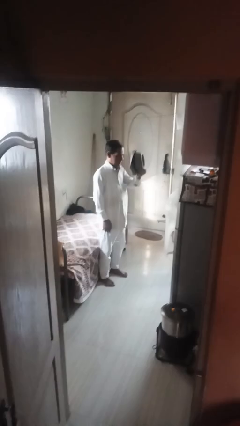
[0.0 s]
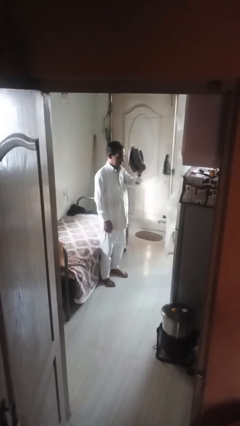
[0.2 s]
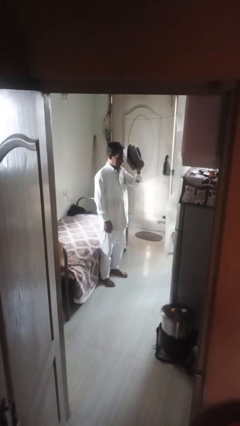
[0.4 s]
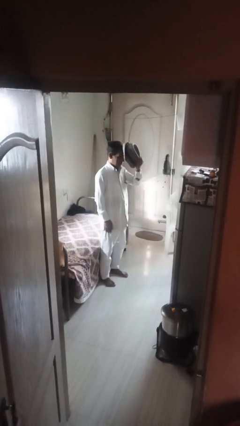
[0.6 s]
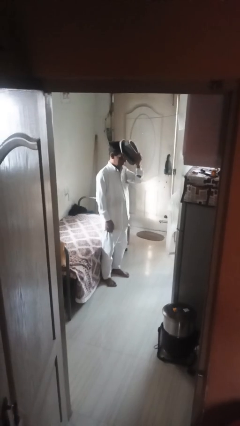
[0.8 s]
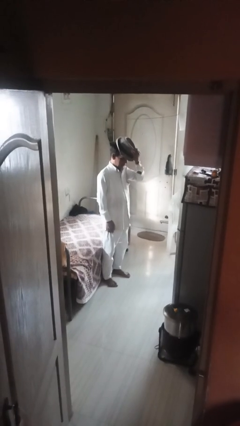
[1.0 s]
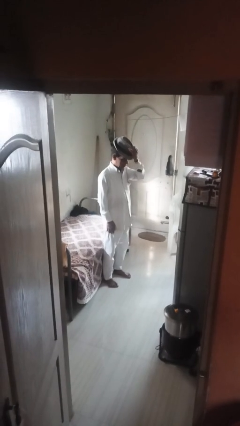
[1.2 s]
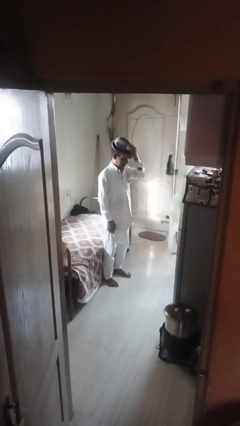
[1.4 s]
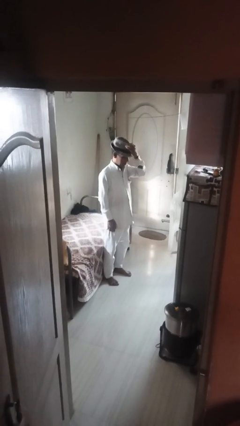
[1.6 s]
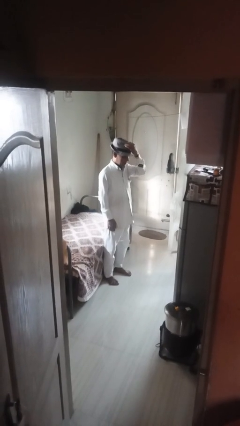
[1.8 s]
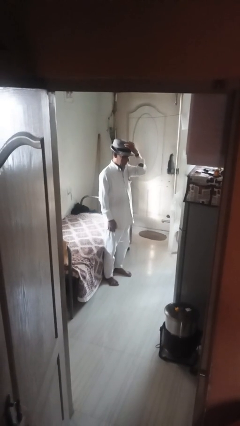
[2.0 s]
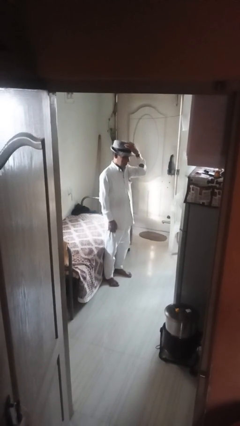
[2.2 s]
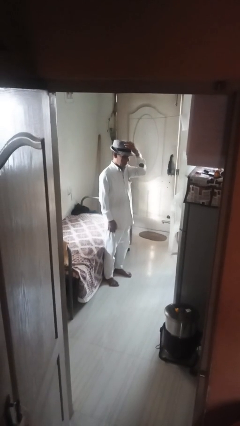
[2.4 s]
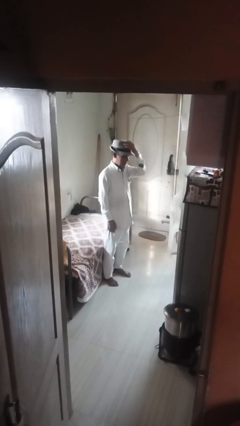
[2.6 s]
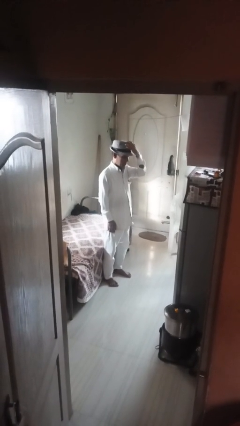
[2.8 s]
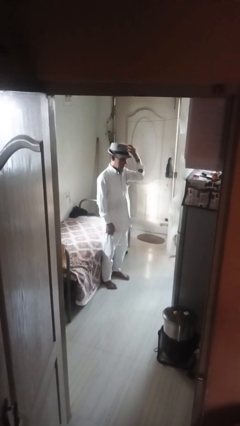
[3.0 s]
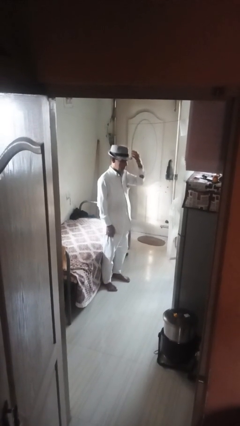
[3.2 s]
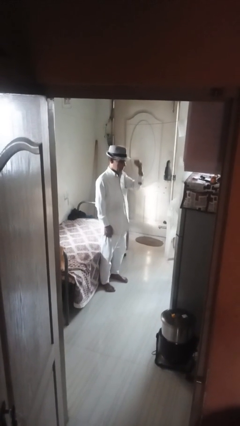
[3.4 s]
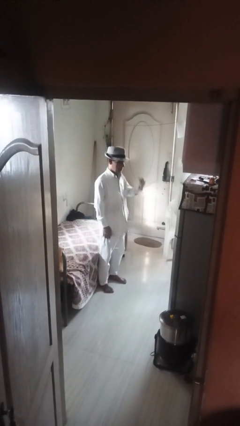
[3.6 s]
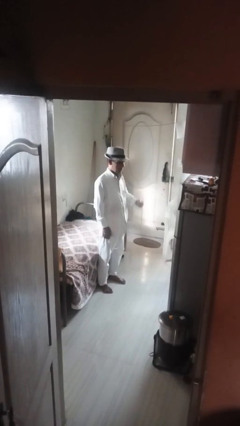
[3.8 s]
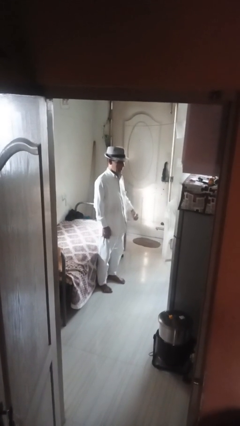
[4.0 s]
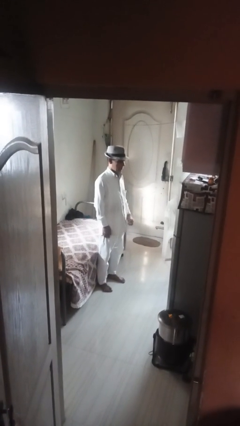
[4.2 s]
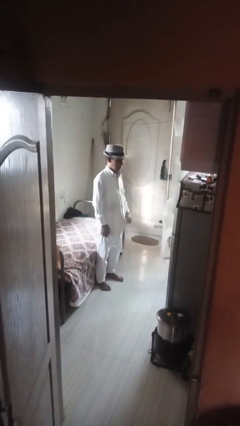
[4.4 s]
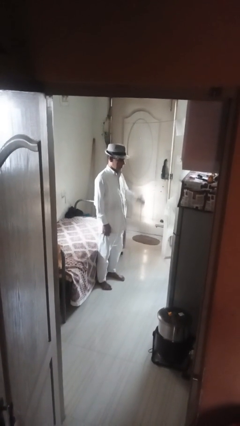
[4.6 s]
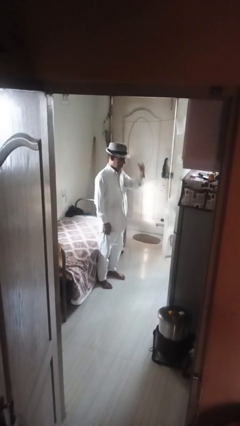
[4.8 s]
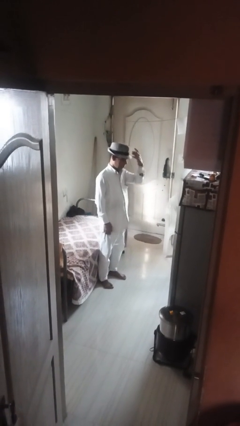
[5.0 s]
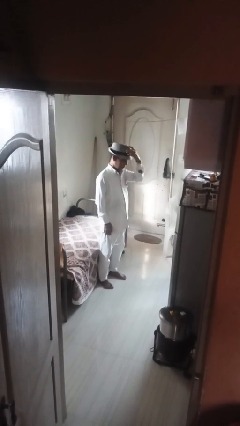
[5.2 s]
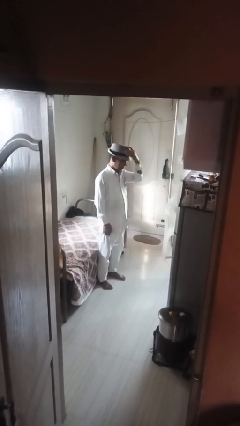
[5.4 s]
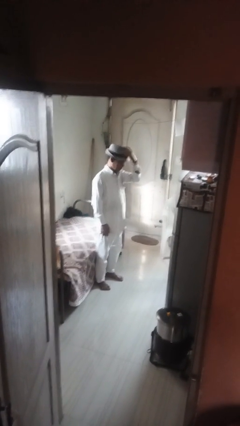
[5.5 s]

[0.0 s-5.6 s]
person puts on hat

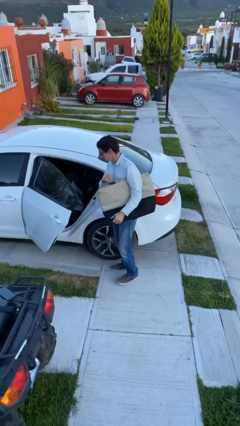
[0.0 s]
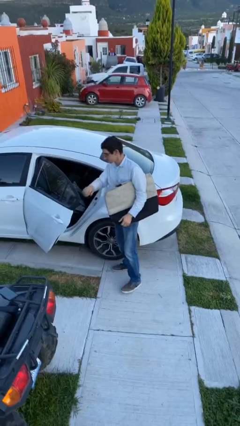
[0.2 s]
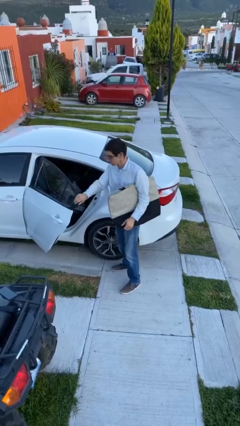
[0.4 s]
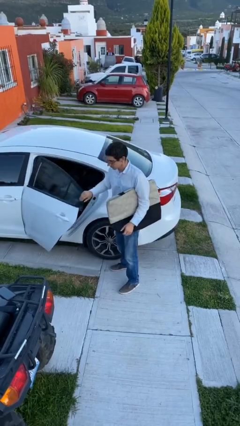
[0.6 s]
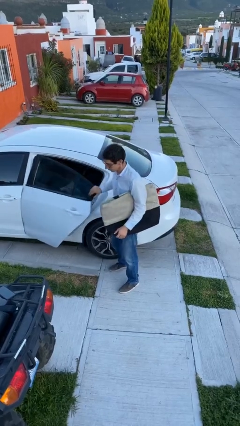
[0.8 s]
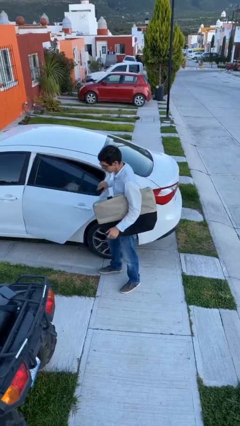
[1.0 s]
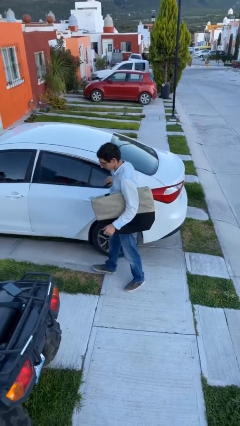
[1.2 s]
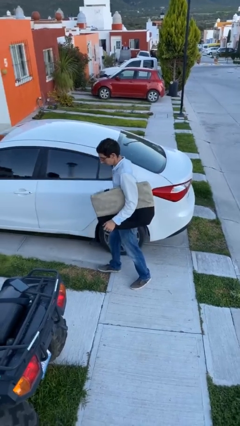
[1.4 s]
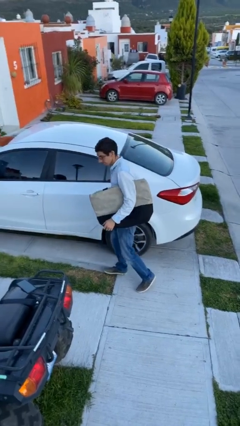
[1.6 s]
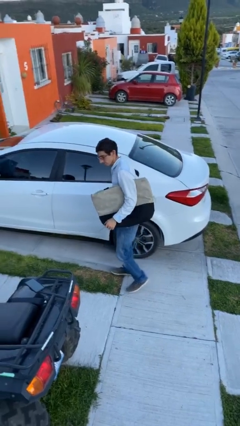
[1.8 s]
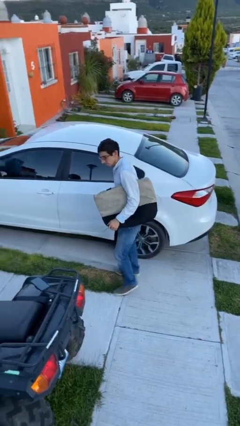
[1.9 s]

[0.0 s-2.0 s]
person closes car door

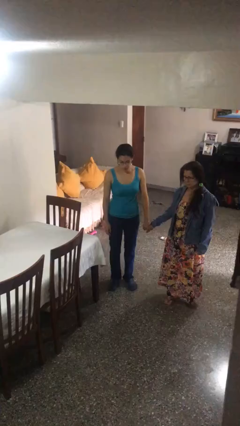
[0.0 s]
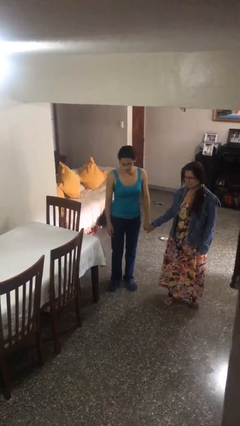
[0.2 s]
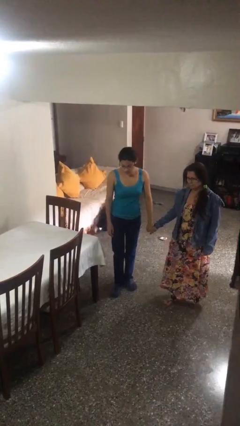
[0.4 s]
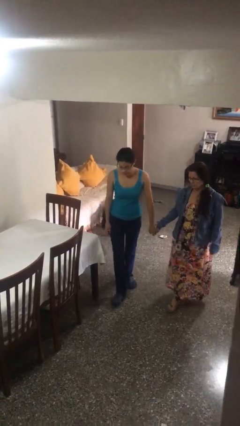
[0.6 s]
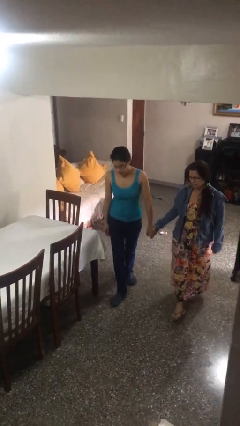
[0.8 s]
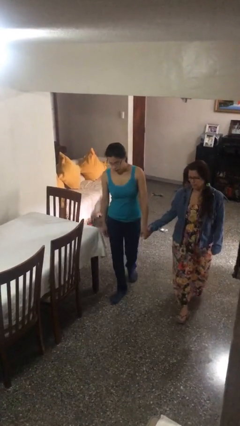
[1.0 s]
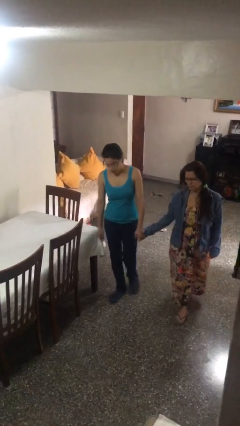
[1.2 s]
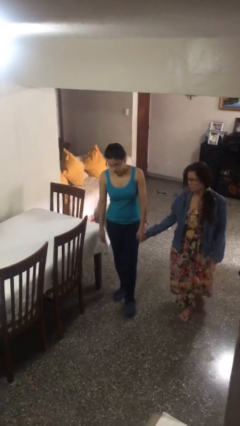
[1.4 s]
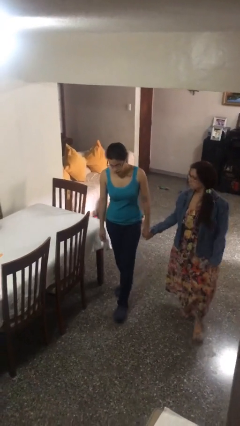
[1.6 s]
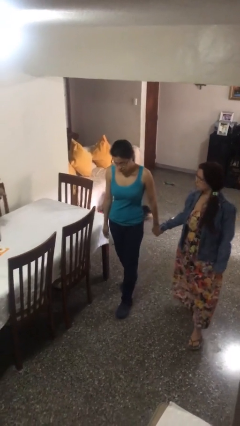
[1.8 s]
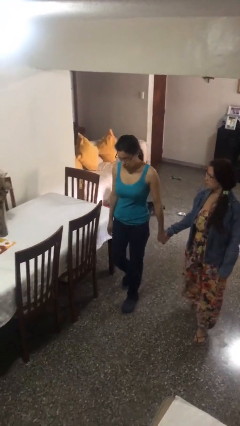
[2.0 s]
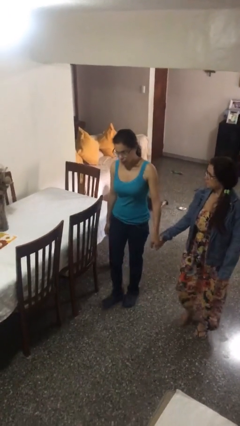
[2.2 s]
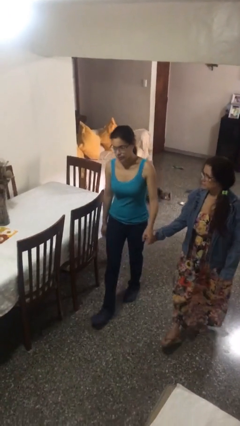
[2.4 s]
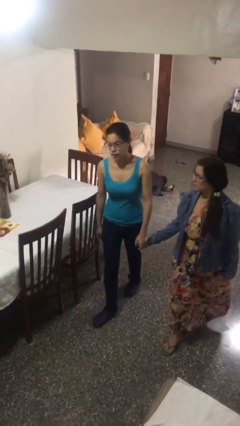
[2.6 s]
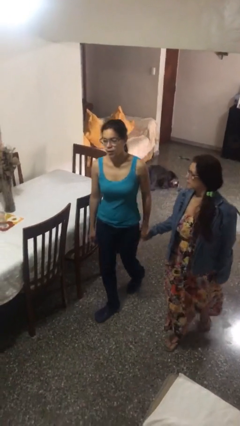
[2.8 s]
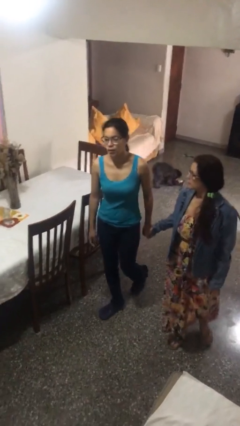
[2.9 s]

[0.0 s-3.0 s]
person holds hand

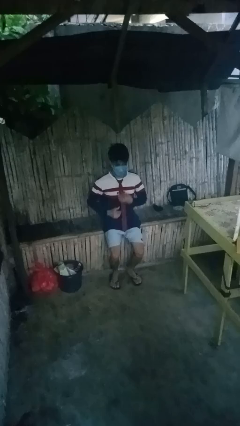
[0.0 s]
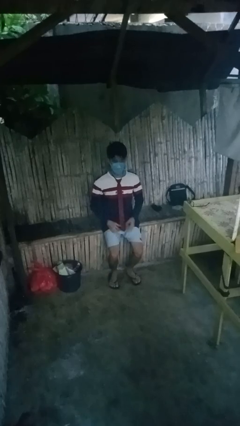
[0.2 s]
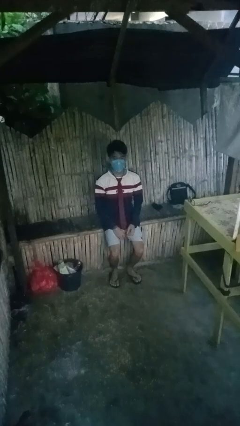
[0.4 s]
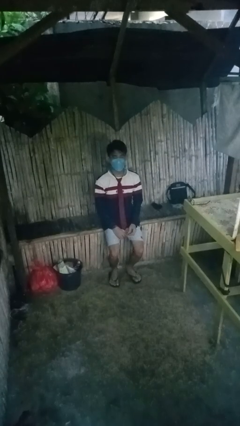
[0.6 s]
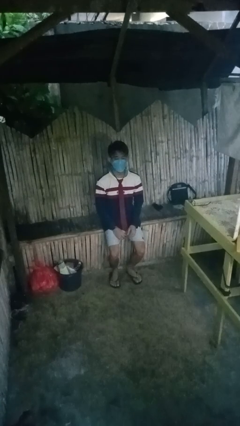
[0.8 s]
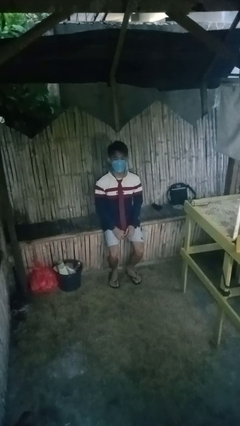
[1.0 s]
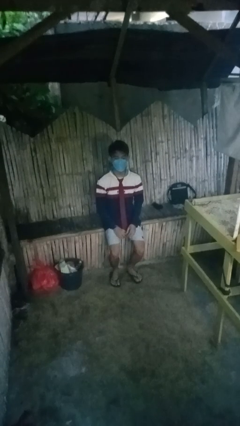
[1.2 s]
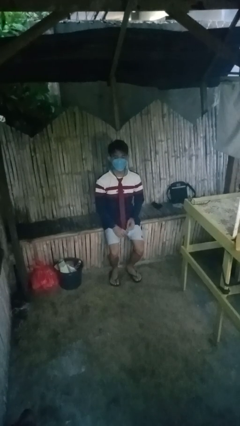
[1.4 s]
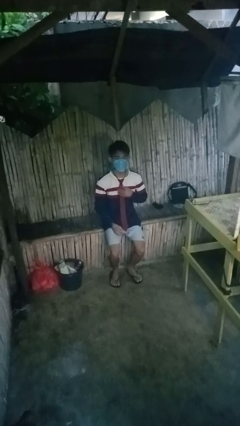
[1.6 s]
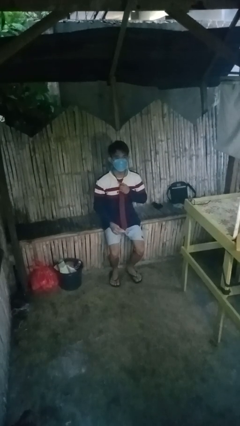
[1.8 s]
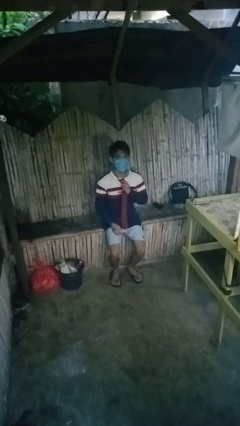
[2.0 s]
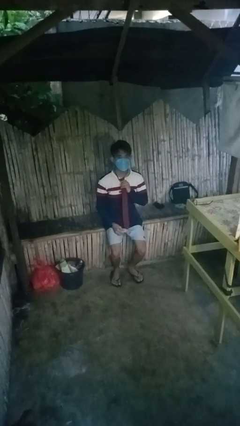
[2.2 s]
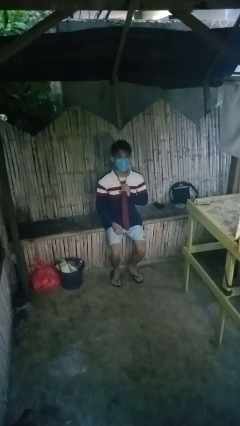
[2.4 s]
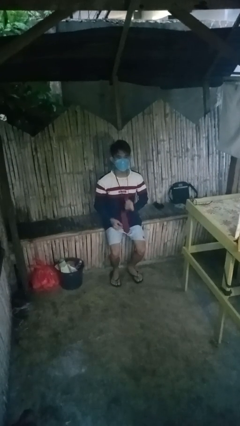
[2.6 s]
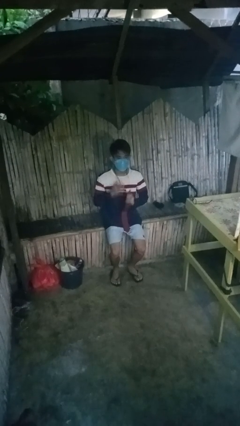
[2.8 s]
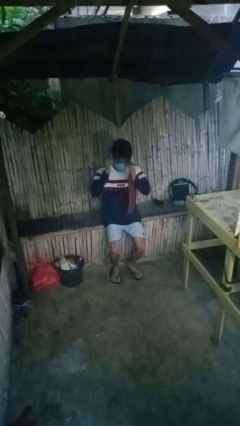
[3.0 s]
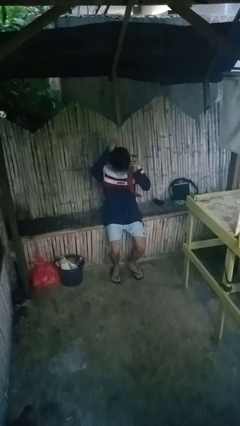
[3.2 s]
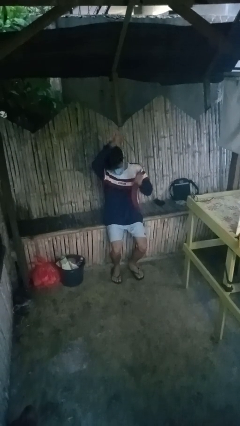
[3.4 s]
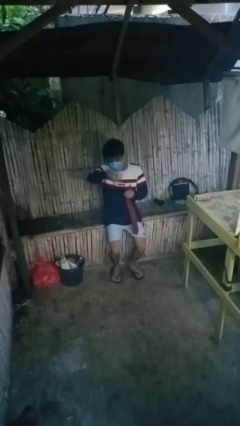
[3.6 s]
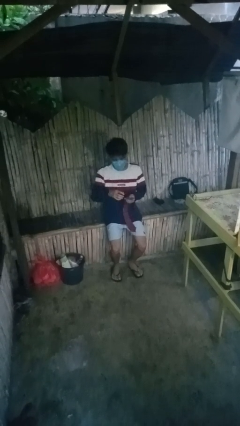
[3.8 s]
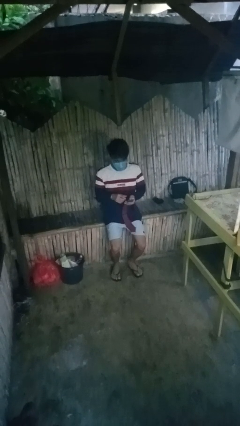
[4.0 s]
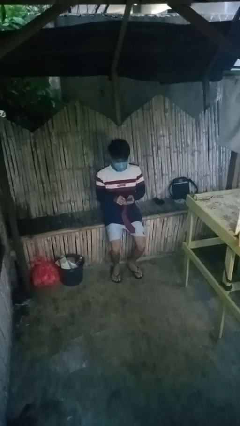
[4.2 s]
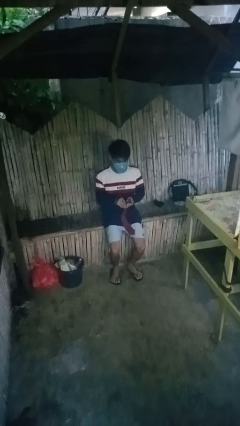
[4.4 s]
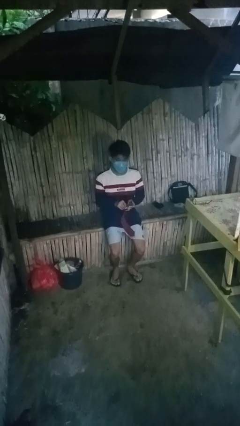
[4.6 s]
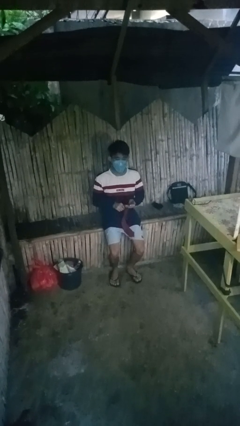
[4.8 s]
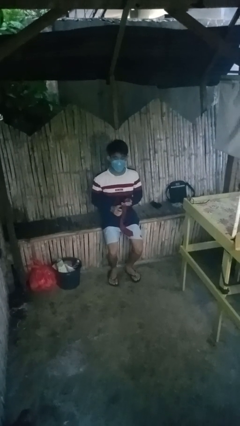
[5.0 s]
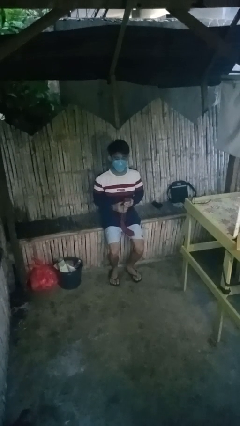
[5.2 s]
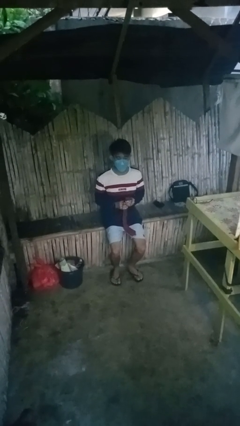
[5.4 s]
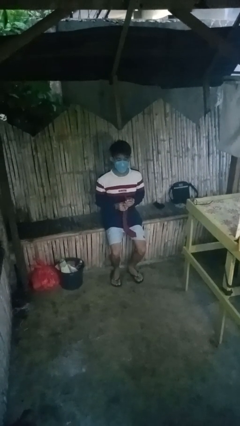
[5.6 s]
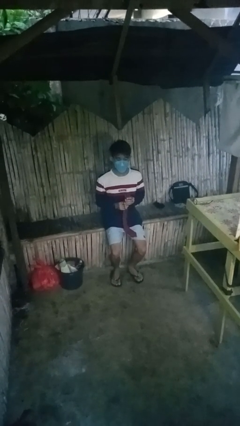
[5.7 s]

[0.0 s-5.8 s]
person takes off necktie

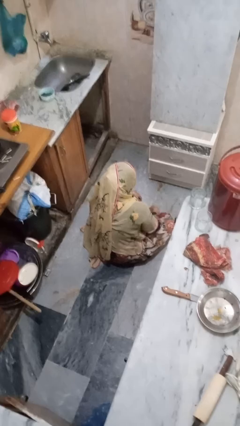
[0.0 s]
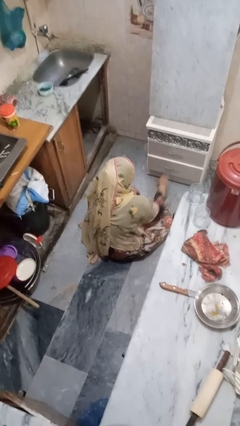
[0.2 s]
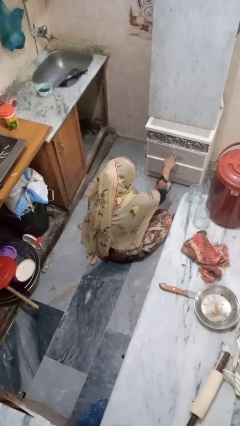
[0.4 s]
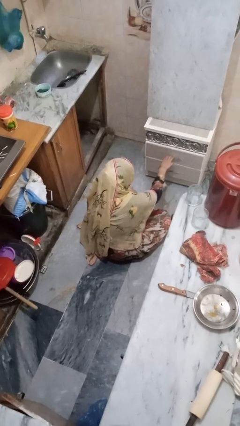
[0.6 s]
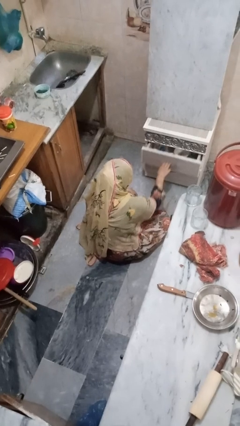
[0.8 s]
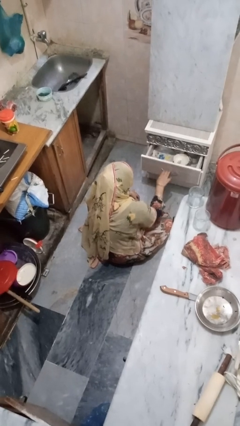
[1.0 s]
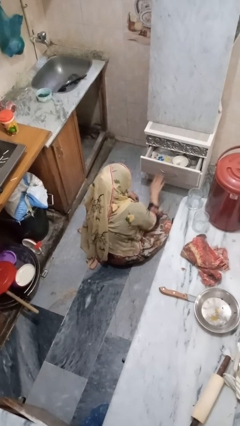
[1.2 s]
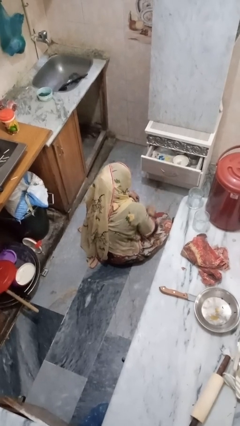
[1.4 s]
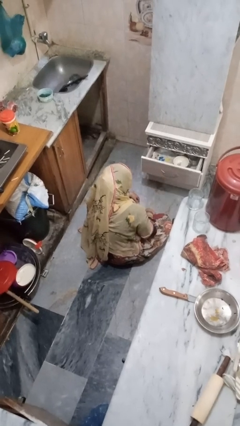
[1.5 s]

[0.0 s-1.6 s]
person opens kitchen drawer
